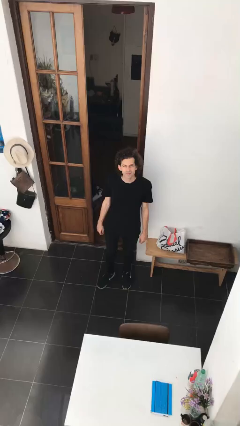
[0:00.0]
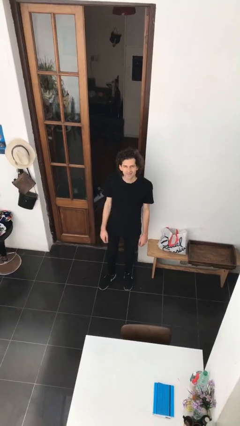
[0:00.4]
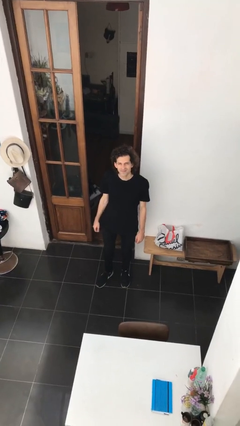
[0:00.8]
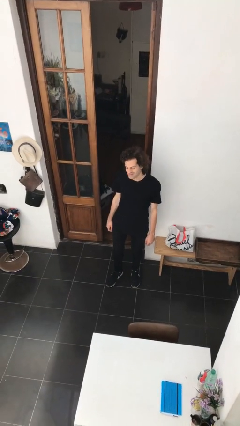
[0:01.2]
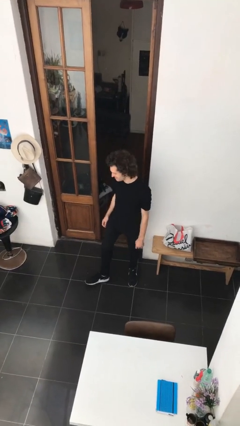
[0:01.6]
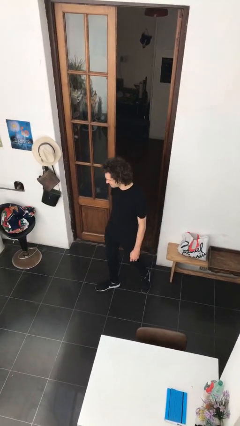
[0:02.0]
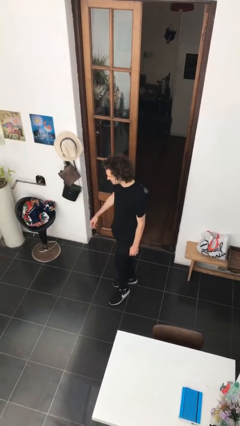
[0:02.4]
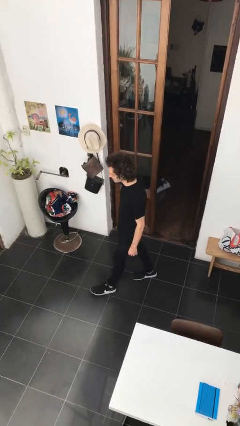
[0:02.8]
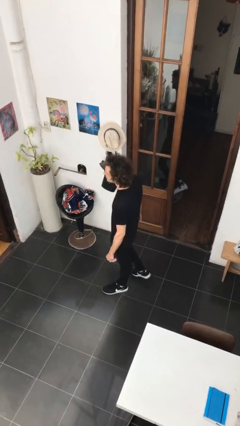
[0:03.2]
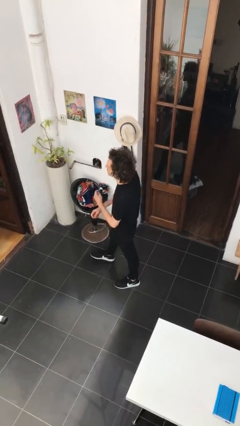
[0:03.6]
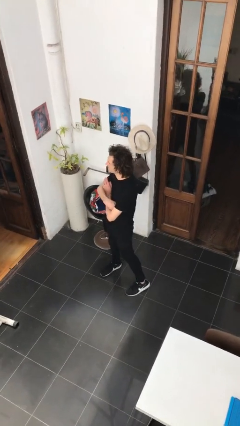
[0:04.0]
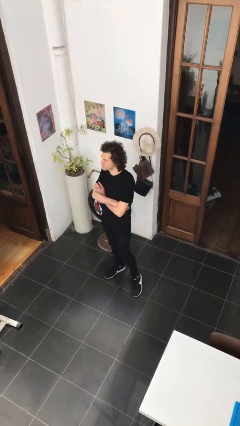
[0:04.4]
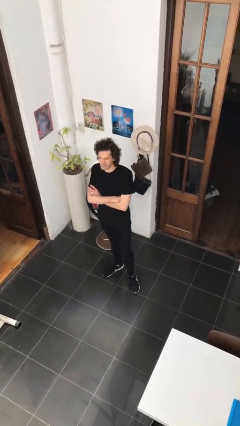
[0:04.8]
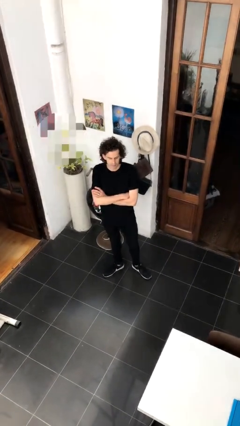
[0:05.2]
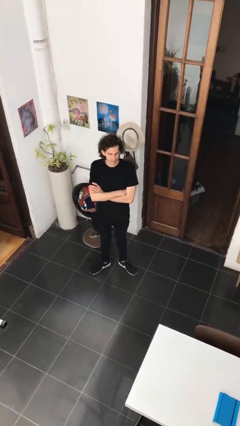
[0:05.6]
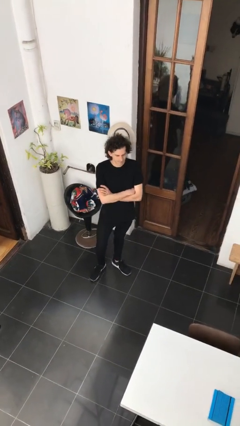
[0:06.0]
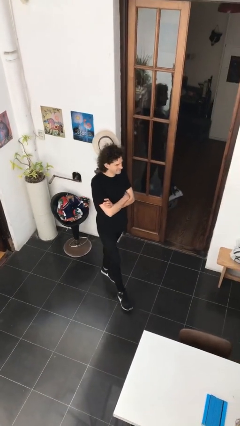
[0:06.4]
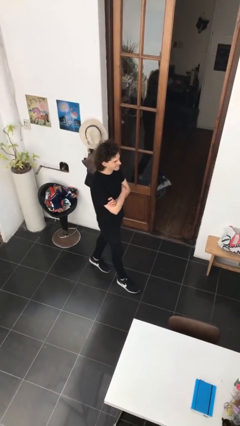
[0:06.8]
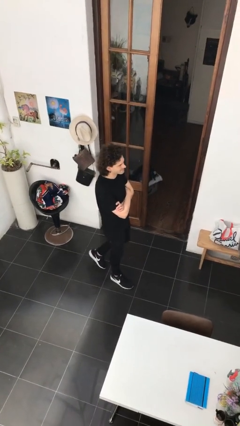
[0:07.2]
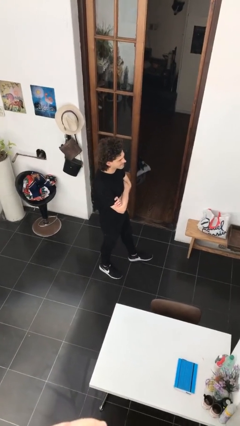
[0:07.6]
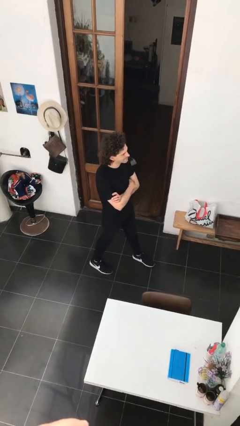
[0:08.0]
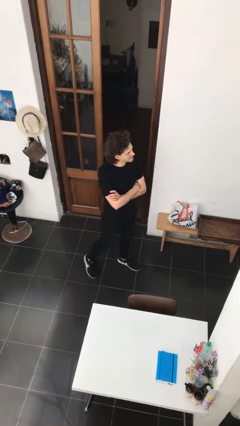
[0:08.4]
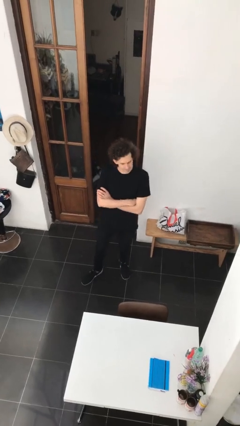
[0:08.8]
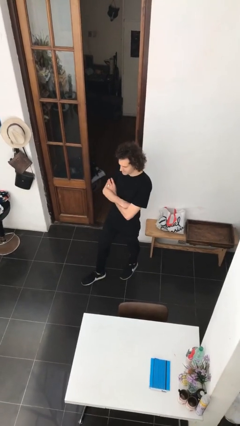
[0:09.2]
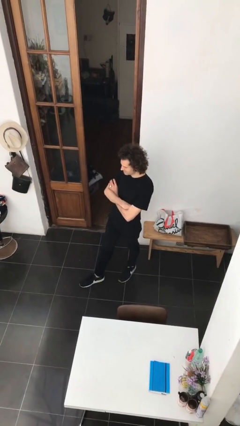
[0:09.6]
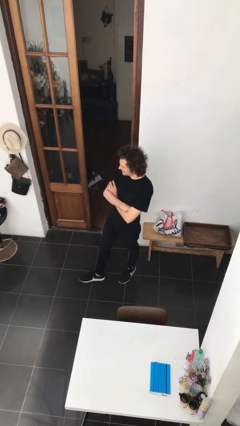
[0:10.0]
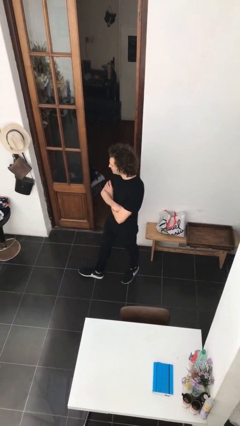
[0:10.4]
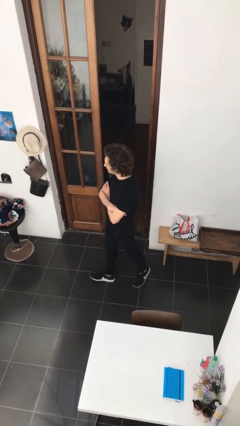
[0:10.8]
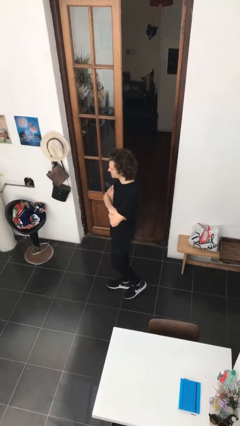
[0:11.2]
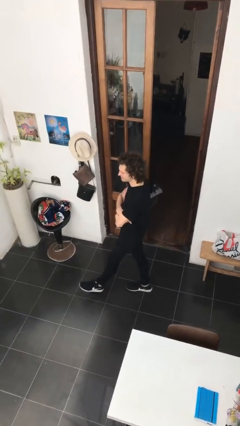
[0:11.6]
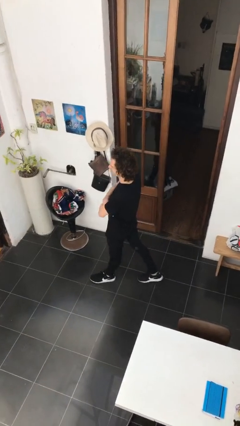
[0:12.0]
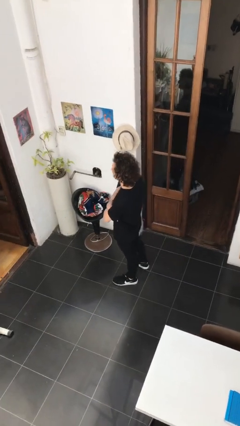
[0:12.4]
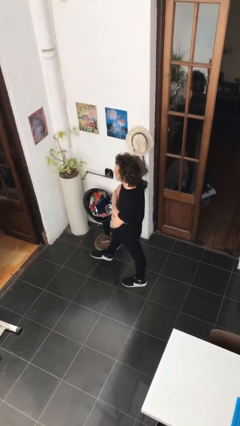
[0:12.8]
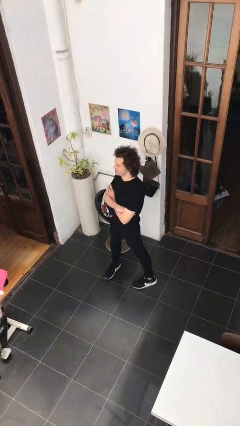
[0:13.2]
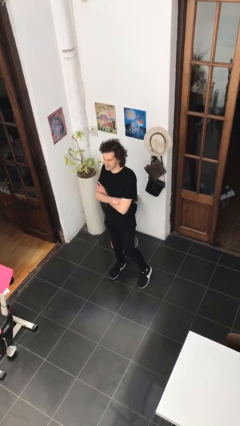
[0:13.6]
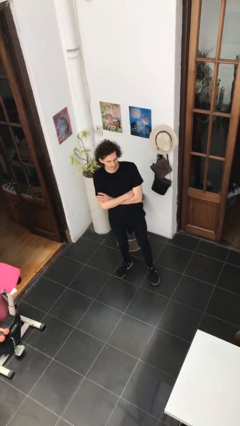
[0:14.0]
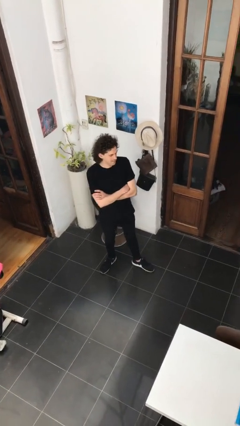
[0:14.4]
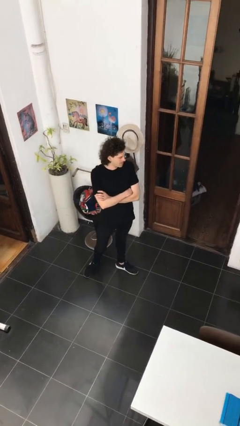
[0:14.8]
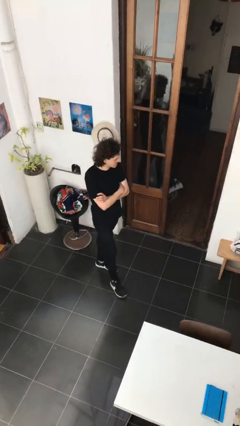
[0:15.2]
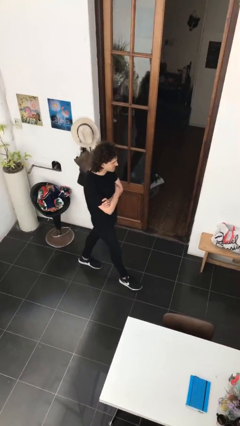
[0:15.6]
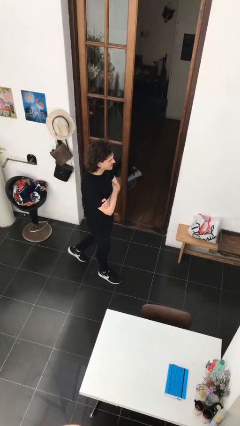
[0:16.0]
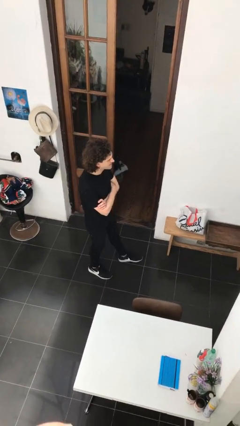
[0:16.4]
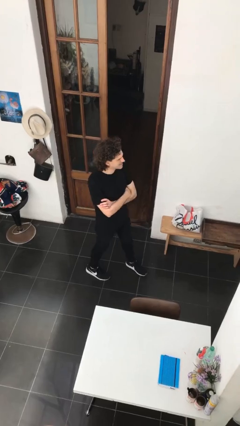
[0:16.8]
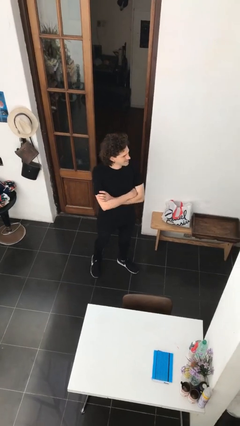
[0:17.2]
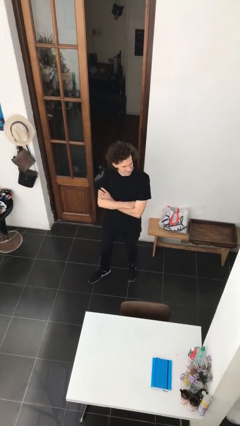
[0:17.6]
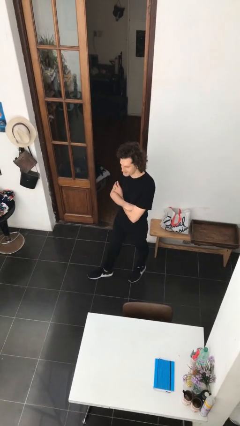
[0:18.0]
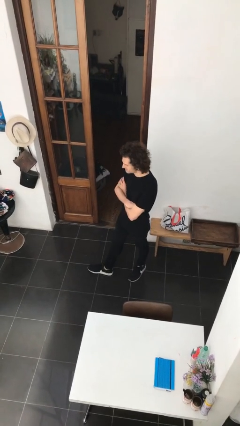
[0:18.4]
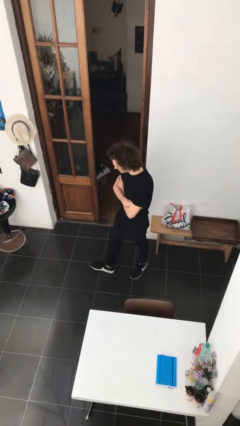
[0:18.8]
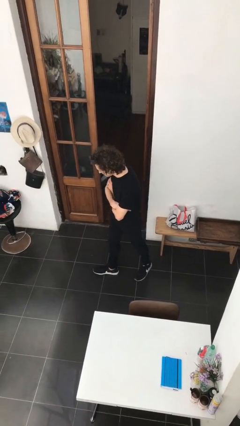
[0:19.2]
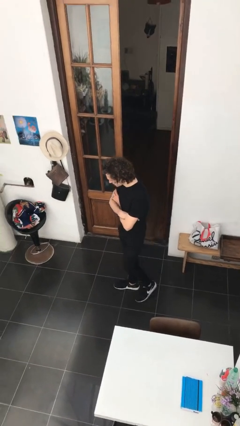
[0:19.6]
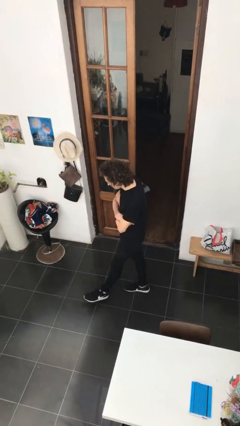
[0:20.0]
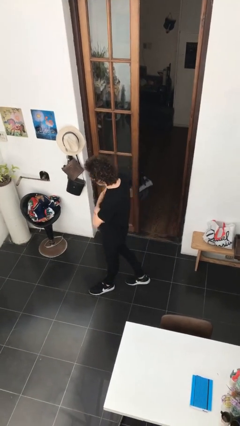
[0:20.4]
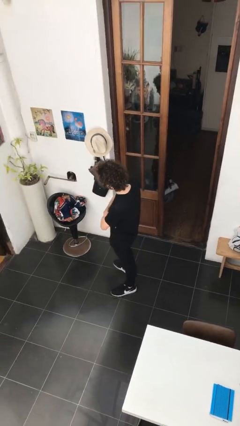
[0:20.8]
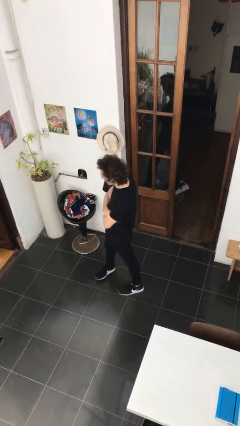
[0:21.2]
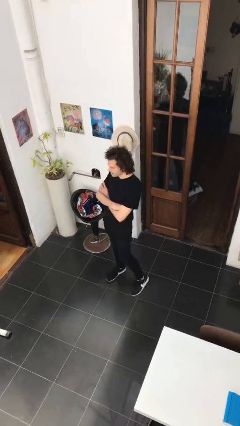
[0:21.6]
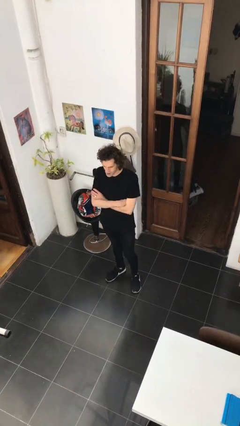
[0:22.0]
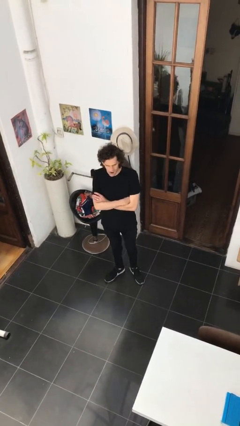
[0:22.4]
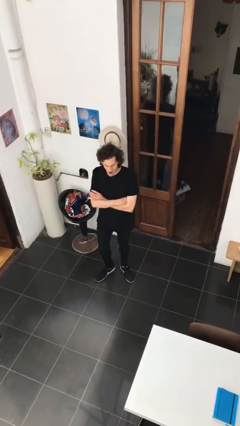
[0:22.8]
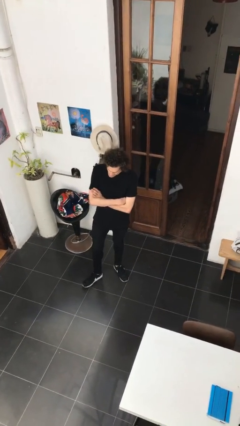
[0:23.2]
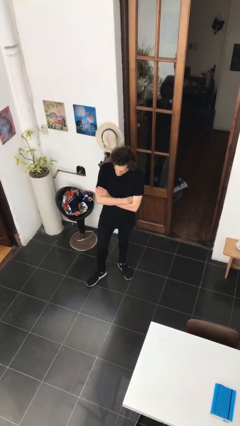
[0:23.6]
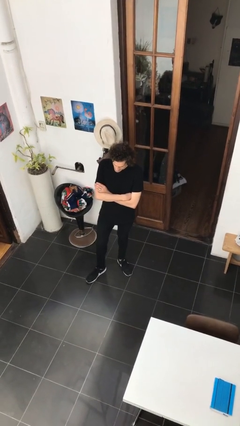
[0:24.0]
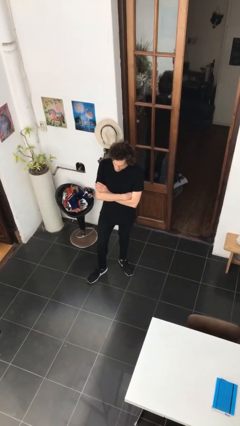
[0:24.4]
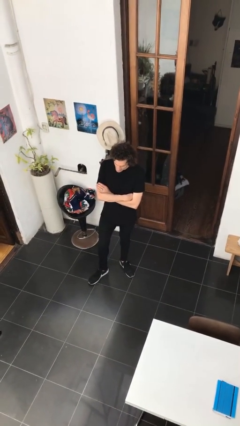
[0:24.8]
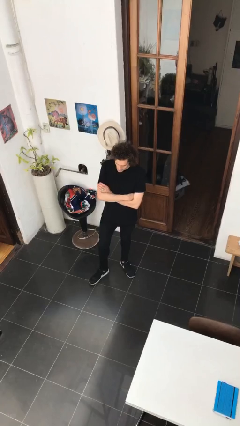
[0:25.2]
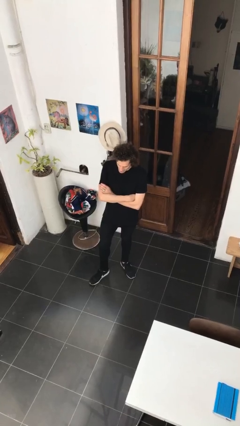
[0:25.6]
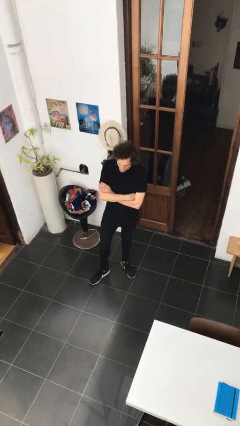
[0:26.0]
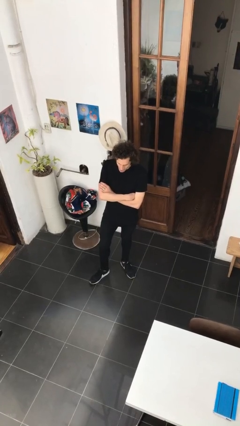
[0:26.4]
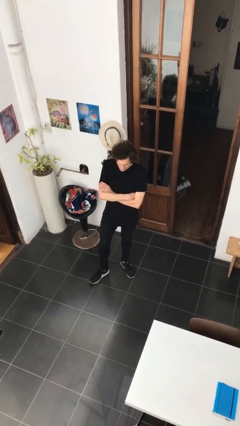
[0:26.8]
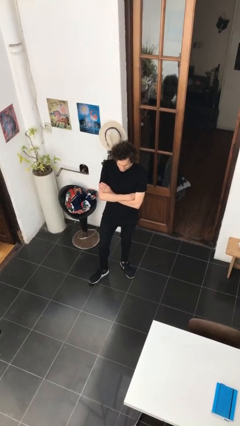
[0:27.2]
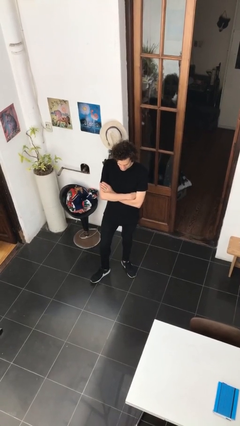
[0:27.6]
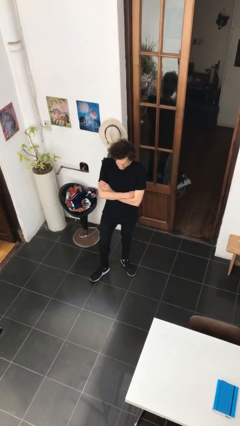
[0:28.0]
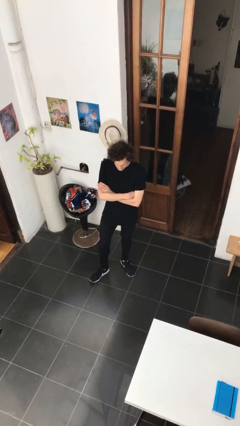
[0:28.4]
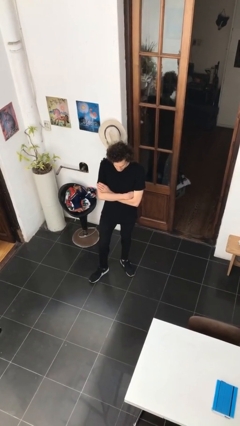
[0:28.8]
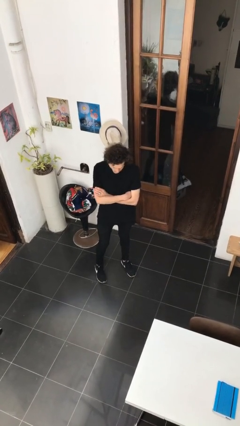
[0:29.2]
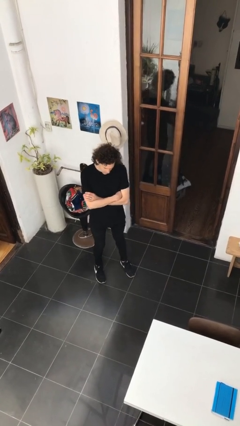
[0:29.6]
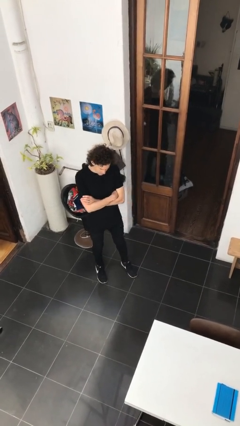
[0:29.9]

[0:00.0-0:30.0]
person walks

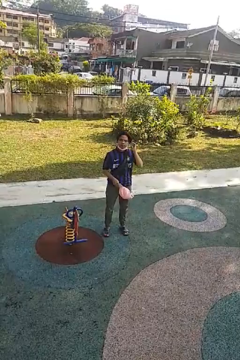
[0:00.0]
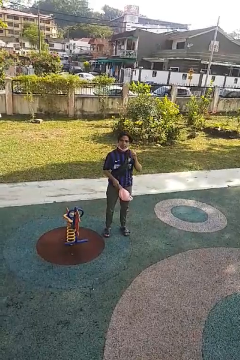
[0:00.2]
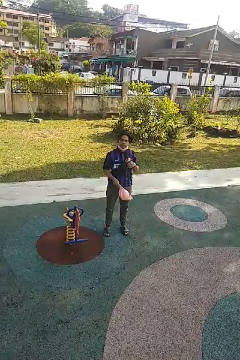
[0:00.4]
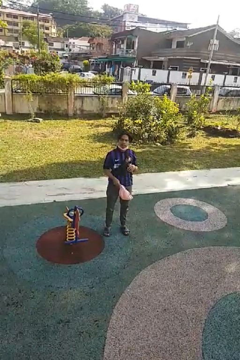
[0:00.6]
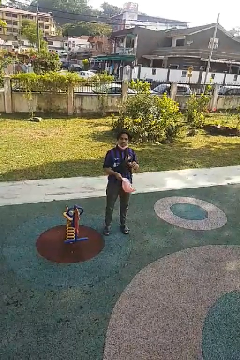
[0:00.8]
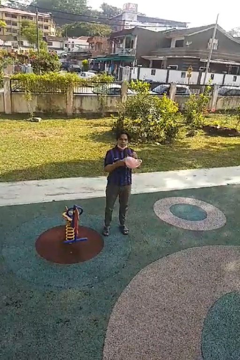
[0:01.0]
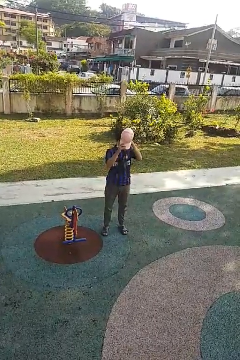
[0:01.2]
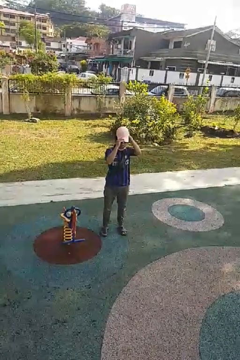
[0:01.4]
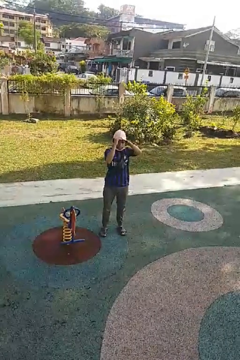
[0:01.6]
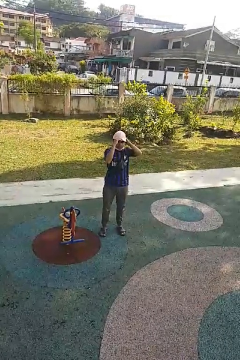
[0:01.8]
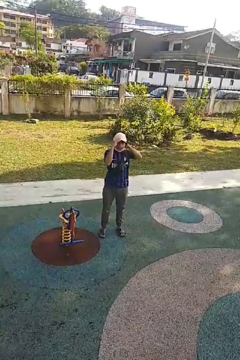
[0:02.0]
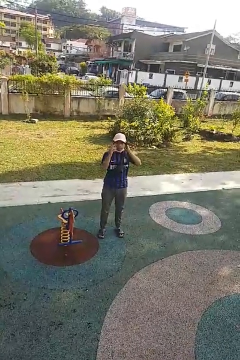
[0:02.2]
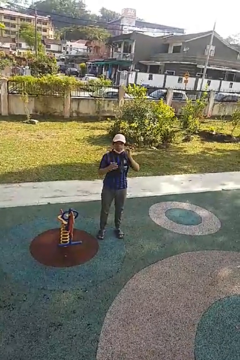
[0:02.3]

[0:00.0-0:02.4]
person puts on hat

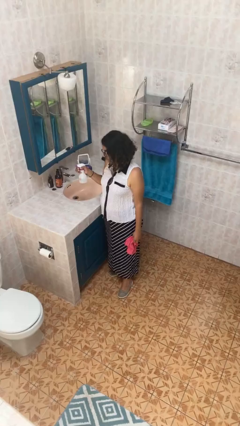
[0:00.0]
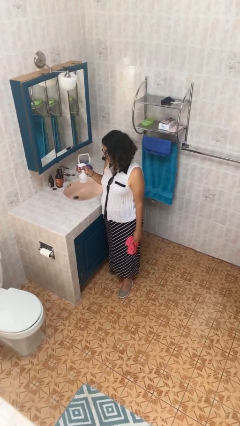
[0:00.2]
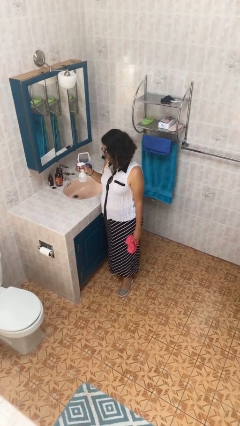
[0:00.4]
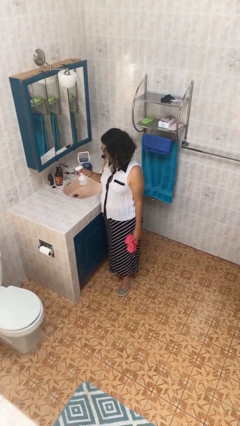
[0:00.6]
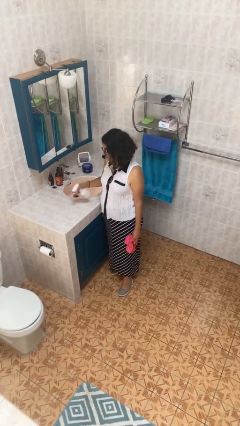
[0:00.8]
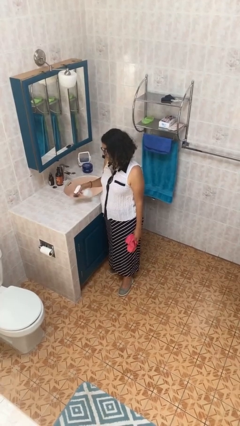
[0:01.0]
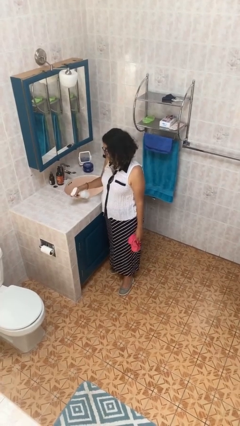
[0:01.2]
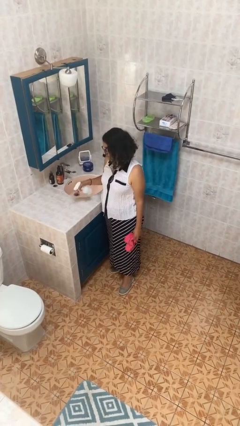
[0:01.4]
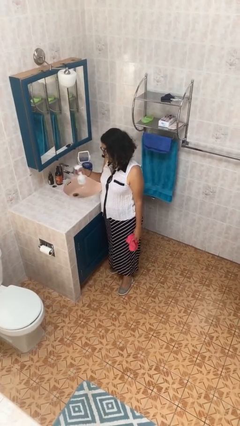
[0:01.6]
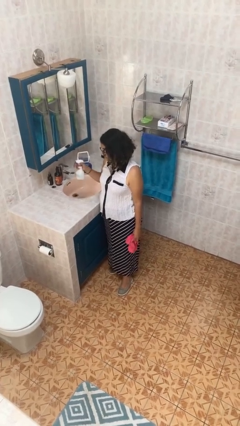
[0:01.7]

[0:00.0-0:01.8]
person sprays from bottle
